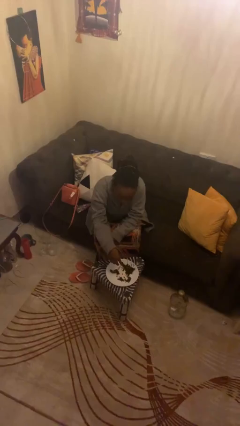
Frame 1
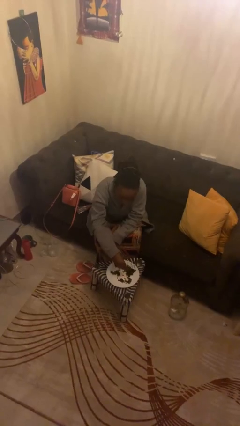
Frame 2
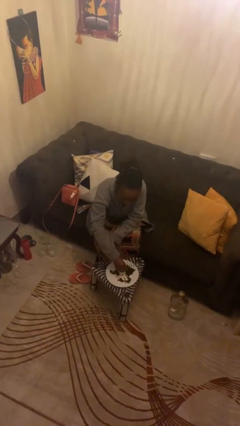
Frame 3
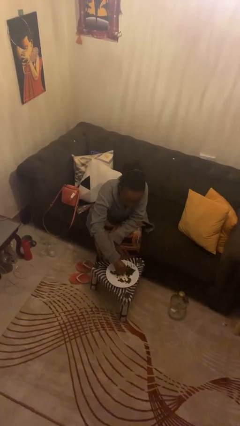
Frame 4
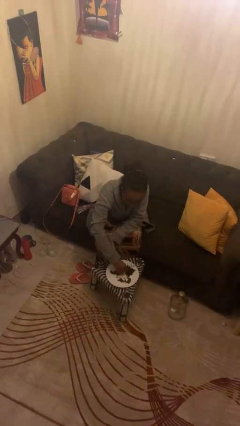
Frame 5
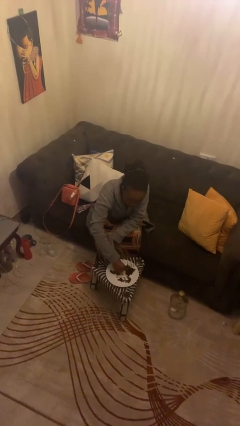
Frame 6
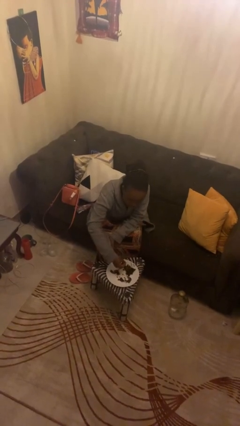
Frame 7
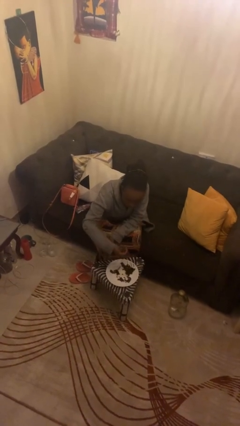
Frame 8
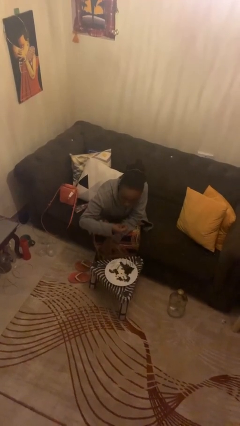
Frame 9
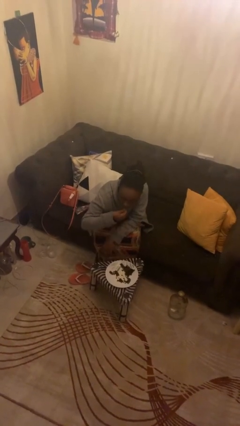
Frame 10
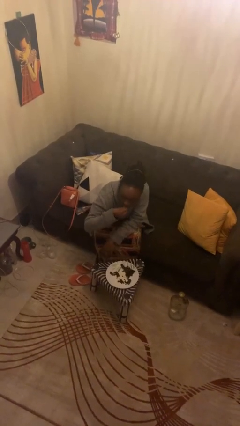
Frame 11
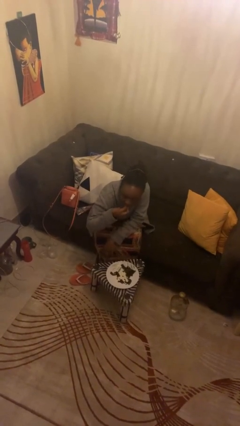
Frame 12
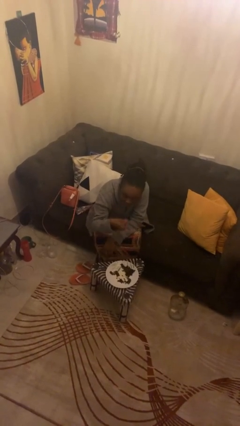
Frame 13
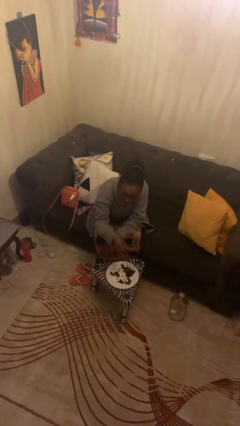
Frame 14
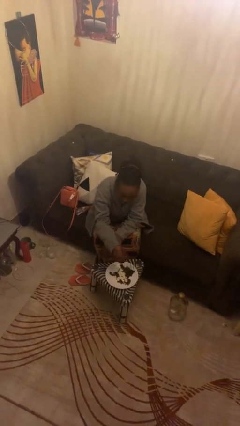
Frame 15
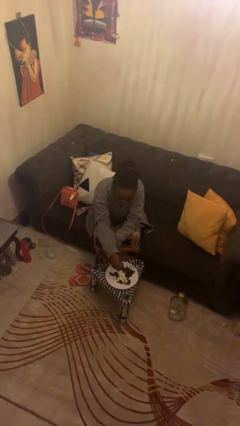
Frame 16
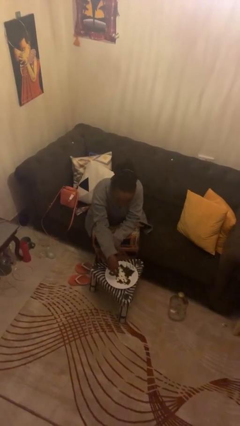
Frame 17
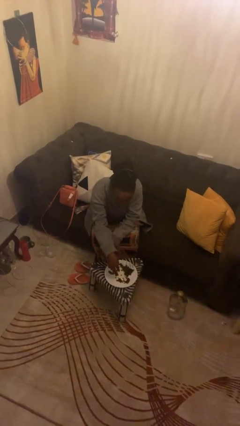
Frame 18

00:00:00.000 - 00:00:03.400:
person eats with hands

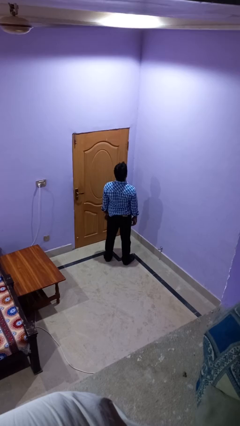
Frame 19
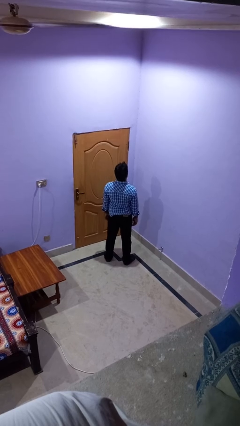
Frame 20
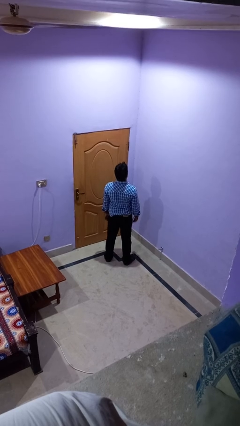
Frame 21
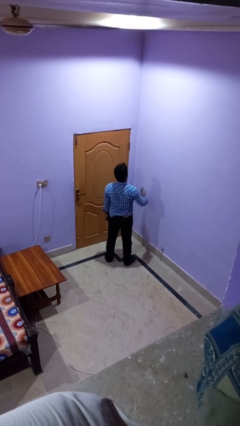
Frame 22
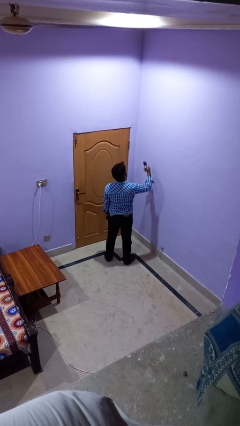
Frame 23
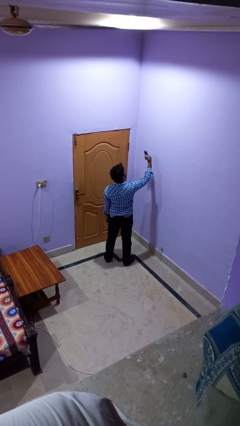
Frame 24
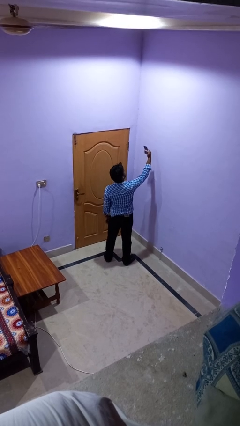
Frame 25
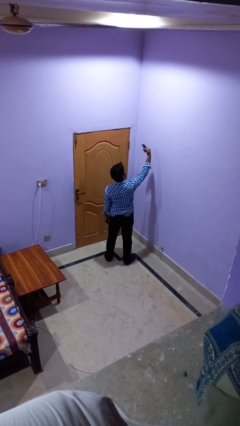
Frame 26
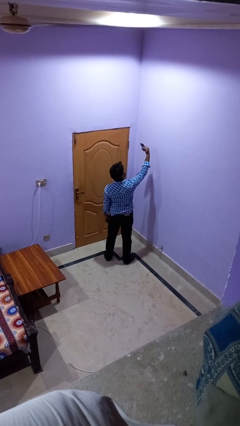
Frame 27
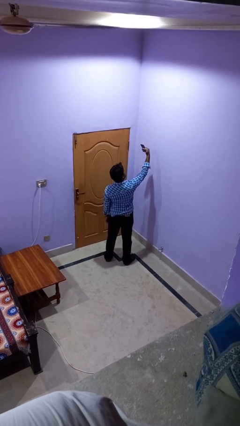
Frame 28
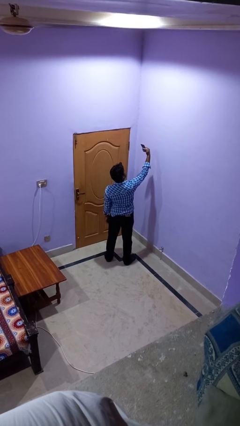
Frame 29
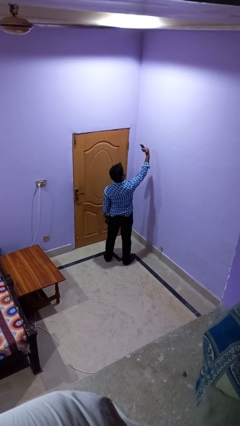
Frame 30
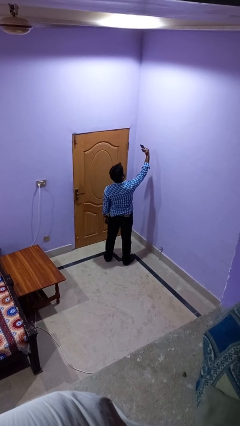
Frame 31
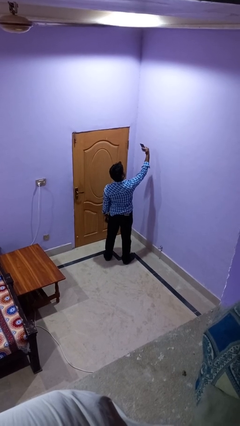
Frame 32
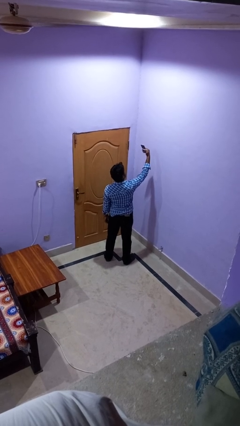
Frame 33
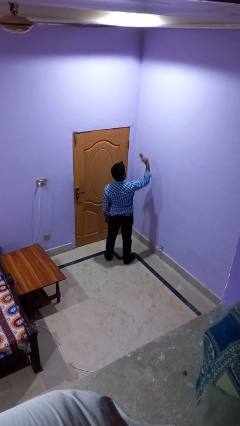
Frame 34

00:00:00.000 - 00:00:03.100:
person takes selfie

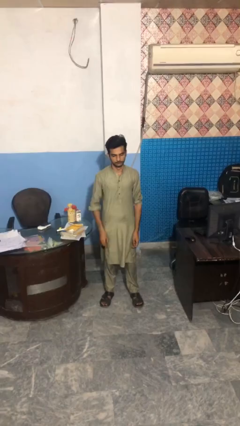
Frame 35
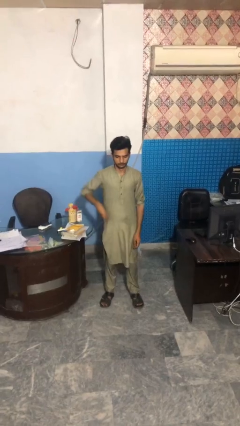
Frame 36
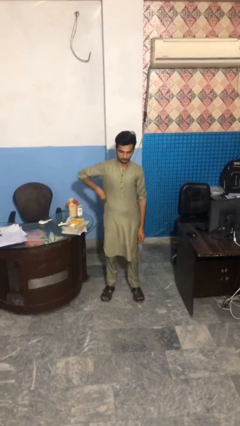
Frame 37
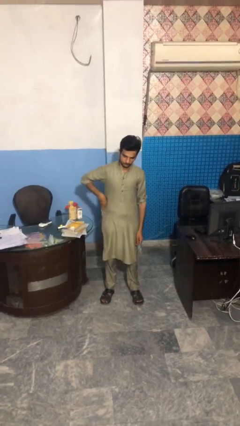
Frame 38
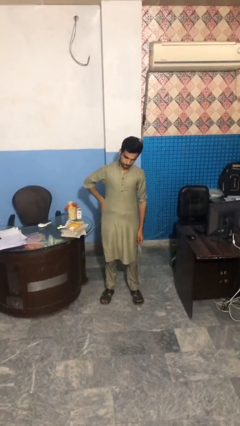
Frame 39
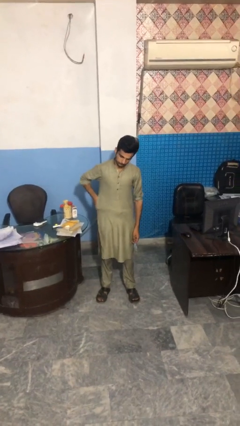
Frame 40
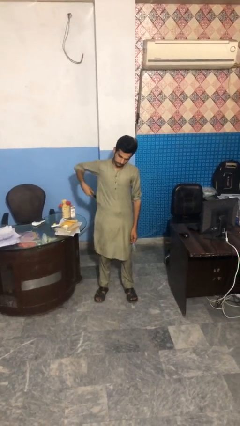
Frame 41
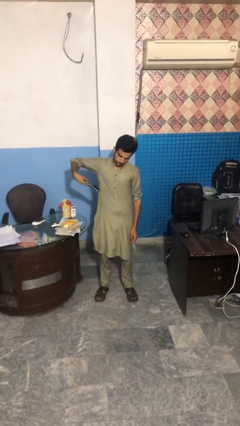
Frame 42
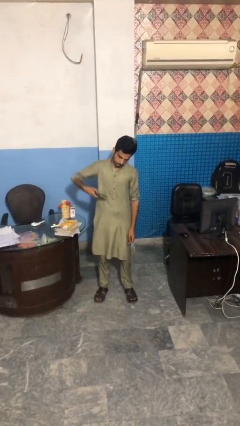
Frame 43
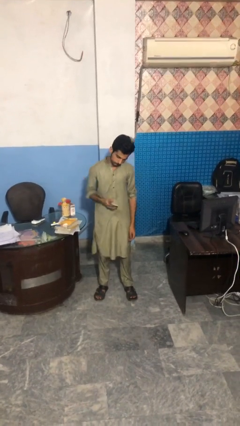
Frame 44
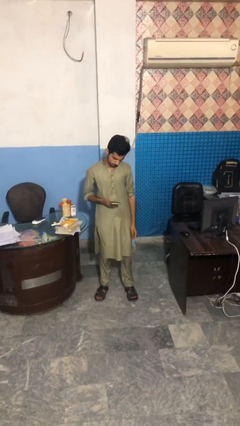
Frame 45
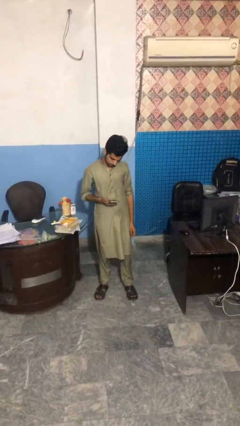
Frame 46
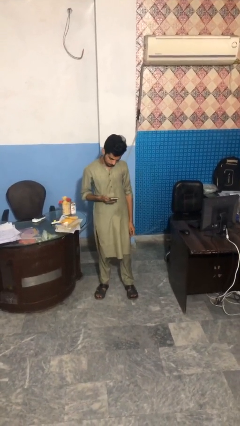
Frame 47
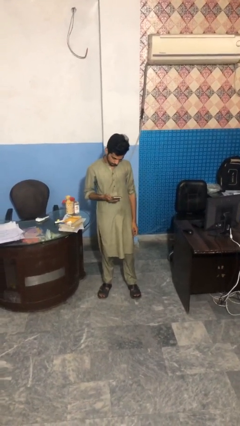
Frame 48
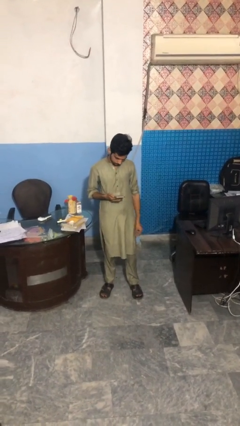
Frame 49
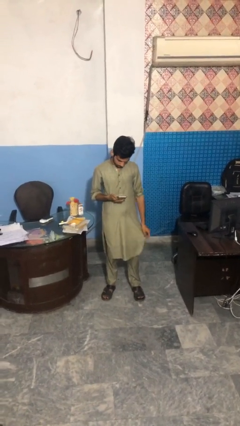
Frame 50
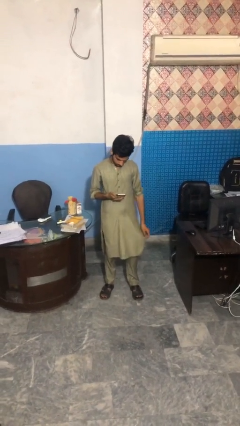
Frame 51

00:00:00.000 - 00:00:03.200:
person takes phone from pocket

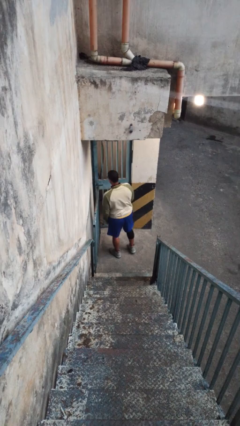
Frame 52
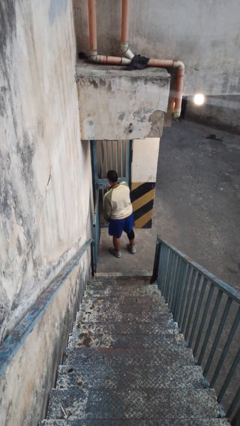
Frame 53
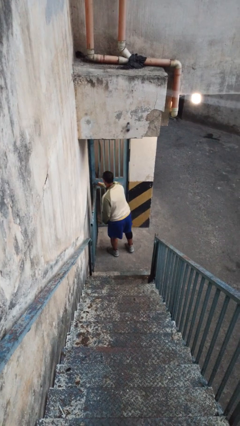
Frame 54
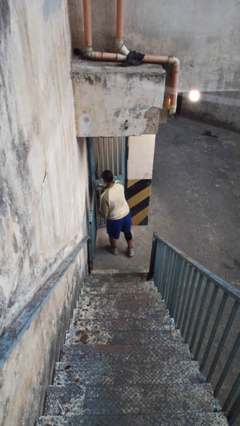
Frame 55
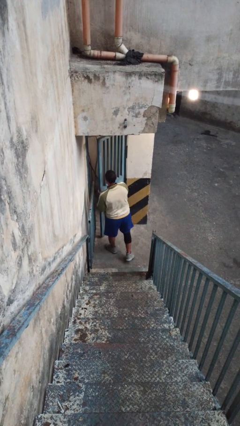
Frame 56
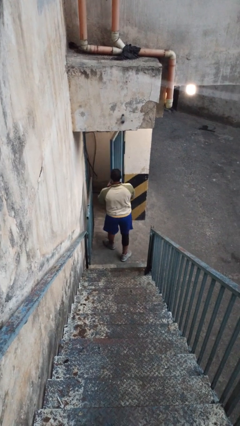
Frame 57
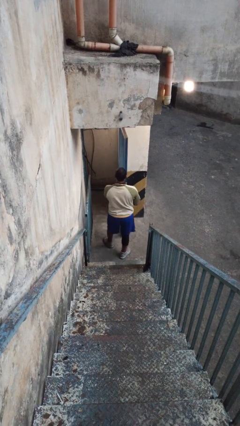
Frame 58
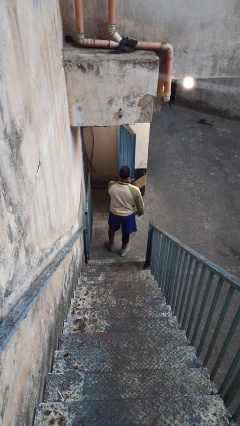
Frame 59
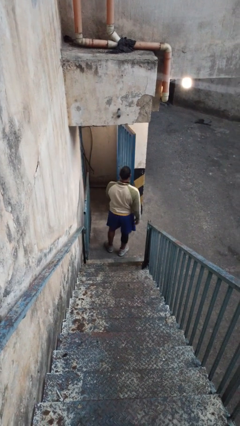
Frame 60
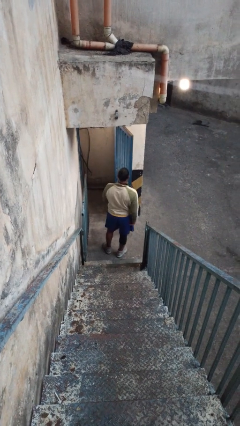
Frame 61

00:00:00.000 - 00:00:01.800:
person opens facility door

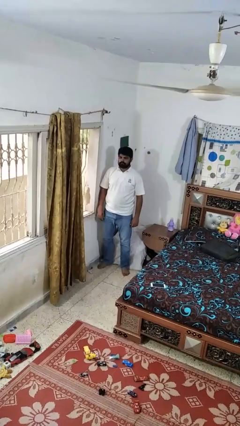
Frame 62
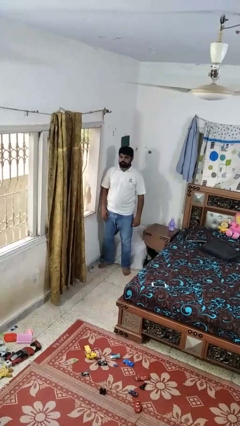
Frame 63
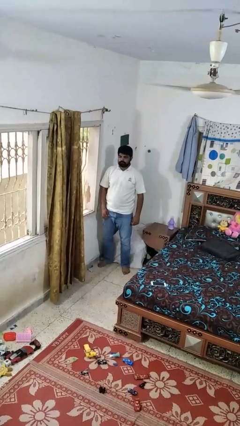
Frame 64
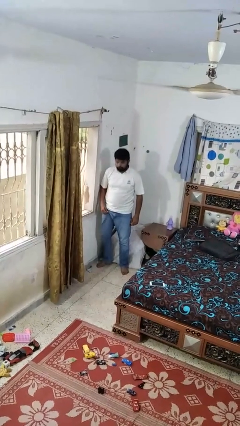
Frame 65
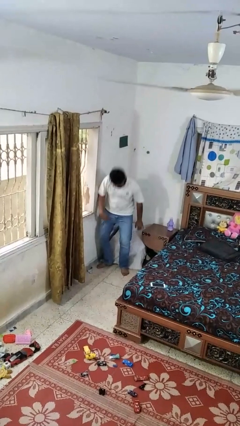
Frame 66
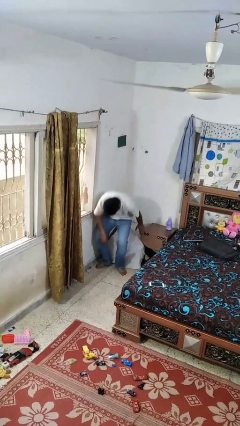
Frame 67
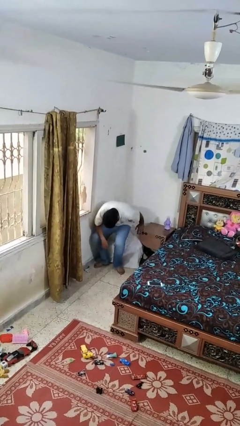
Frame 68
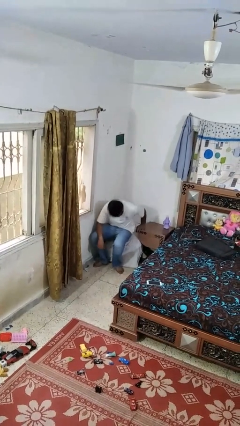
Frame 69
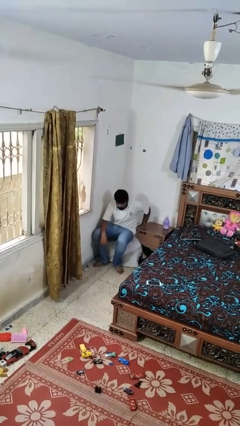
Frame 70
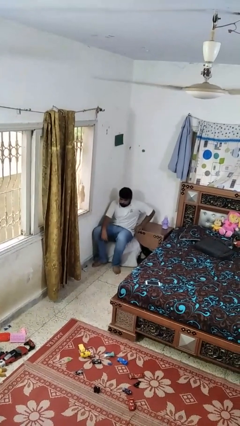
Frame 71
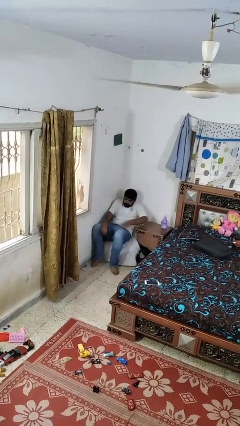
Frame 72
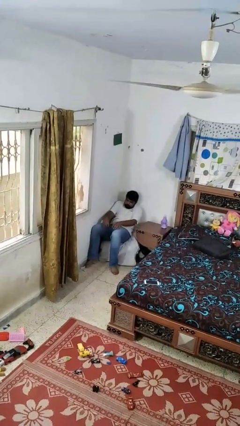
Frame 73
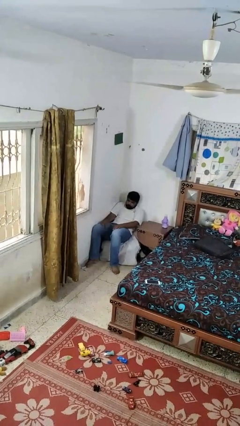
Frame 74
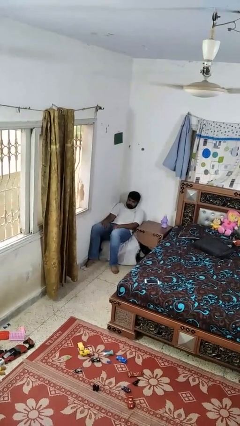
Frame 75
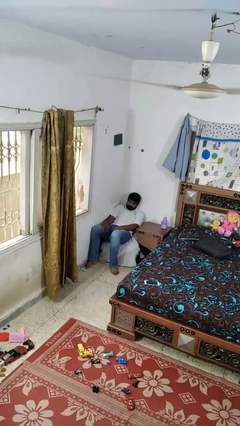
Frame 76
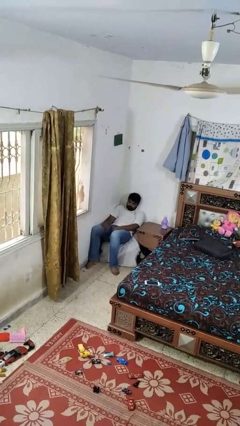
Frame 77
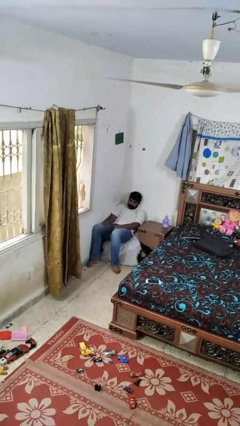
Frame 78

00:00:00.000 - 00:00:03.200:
person lies down on couch

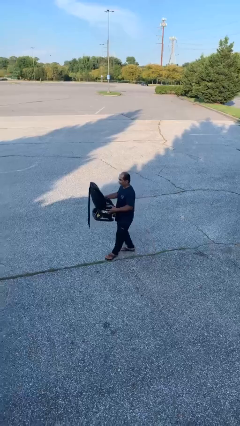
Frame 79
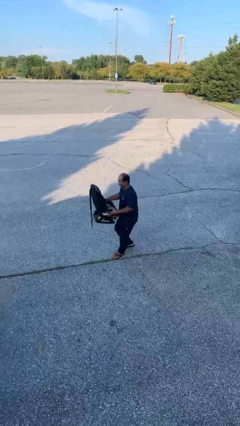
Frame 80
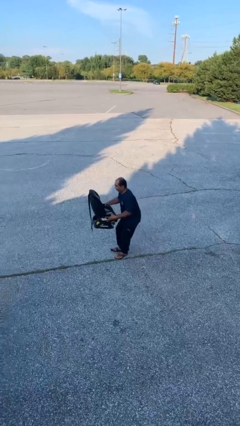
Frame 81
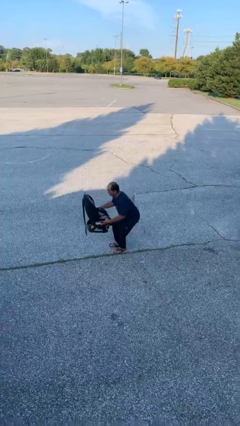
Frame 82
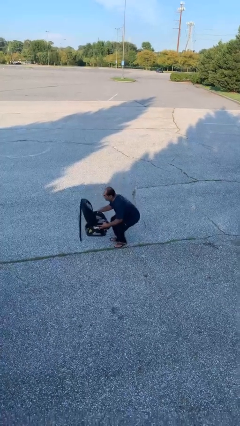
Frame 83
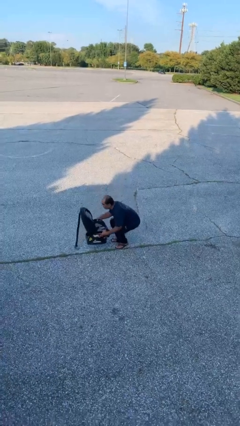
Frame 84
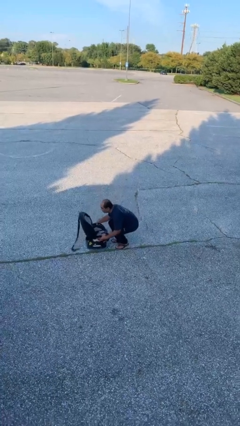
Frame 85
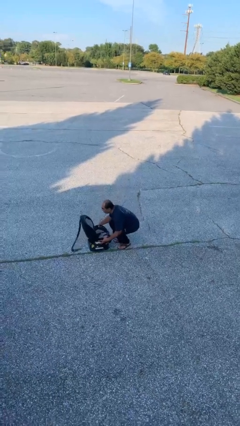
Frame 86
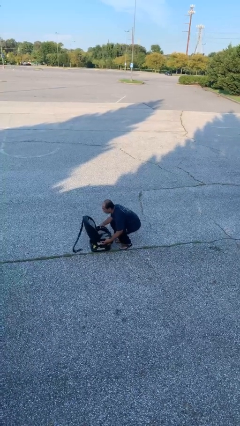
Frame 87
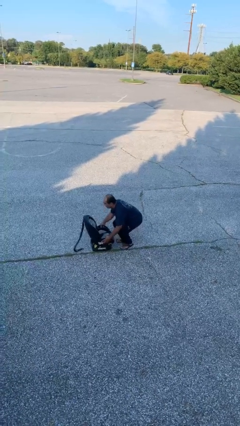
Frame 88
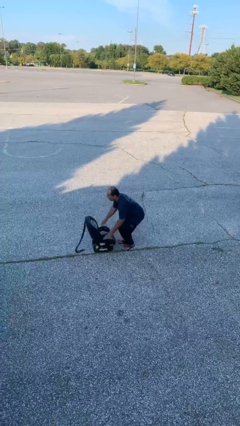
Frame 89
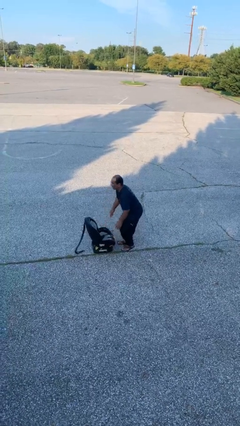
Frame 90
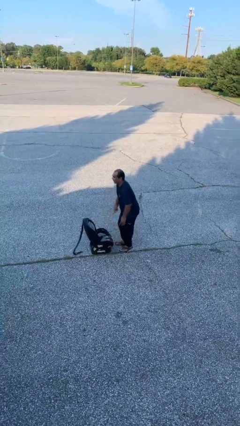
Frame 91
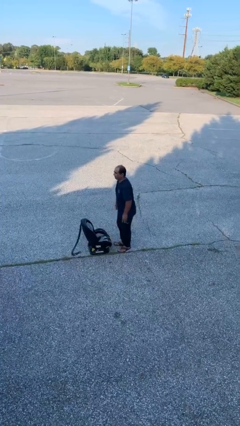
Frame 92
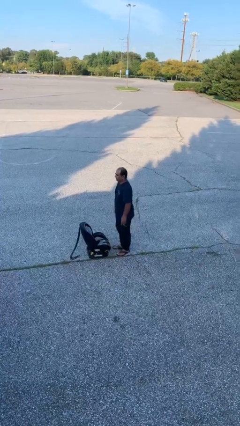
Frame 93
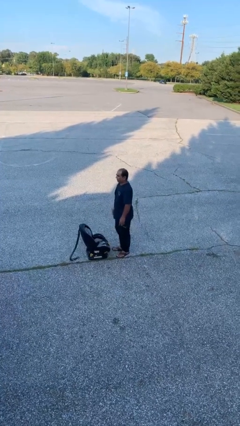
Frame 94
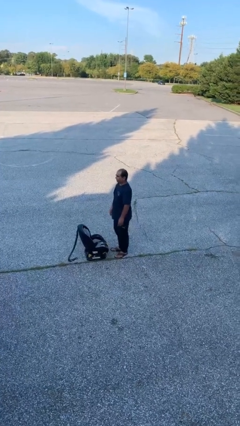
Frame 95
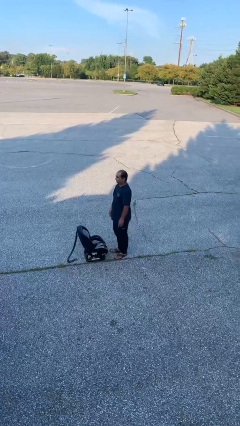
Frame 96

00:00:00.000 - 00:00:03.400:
person puts down object on floor
